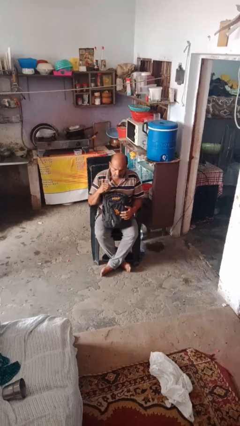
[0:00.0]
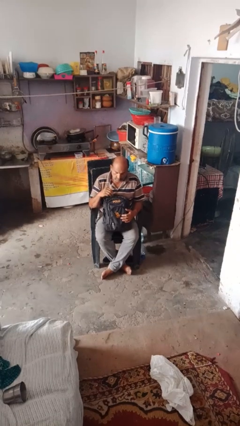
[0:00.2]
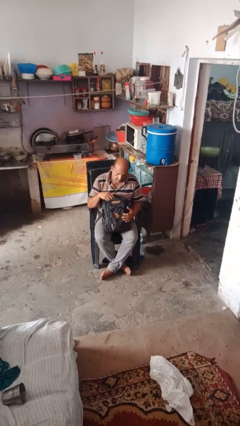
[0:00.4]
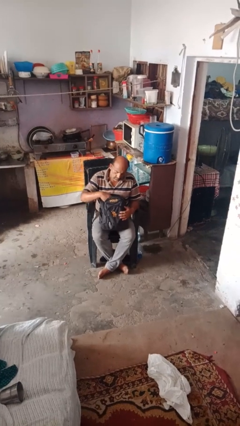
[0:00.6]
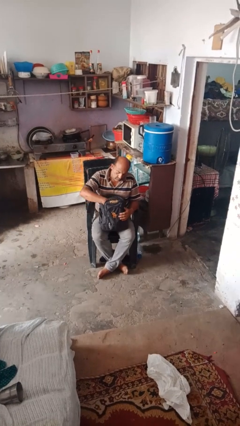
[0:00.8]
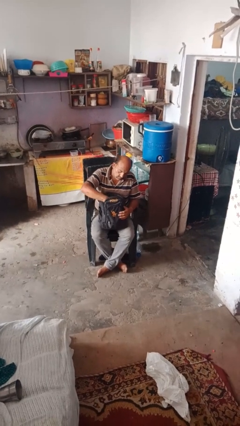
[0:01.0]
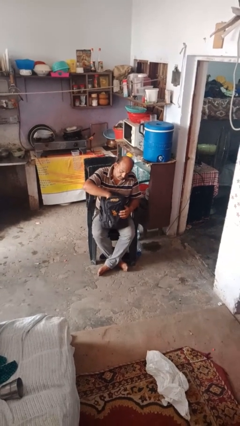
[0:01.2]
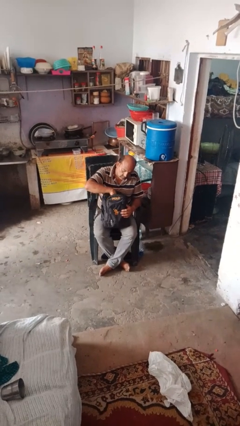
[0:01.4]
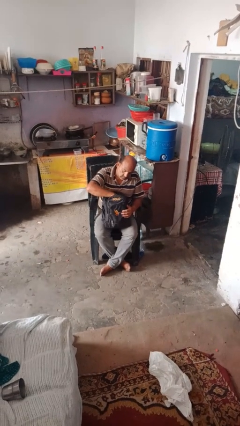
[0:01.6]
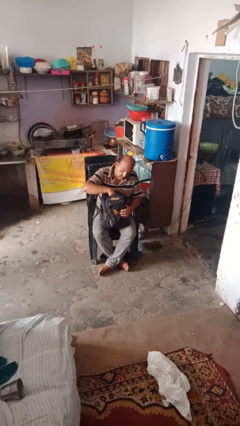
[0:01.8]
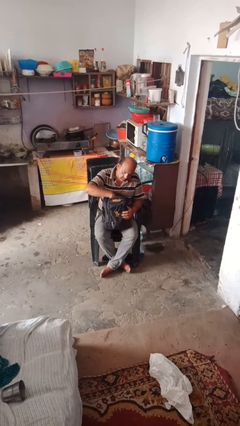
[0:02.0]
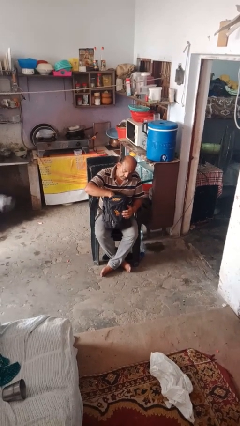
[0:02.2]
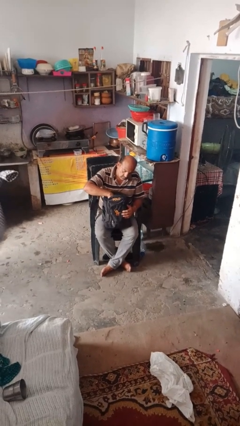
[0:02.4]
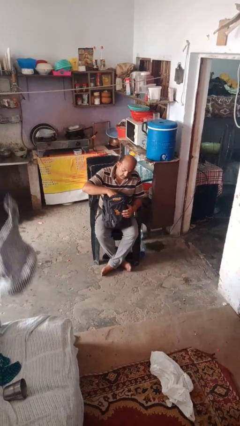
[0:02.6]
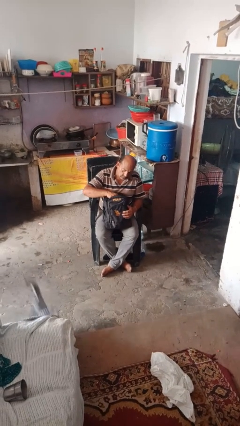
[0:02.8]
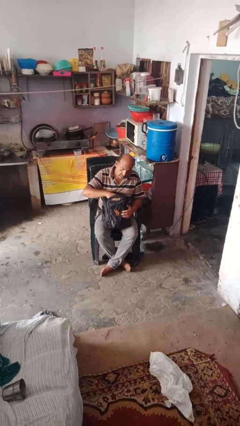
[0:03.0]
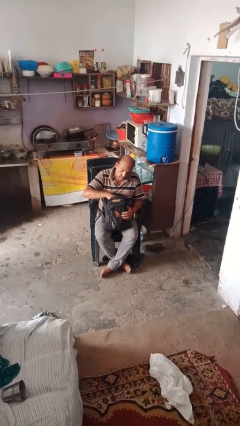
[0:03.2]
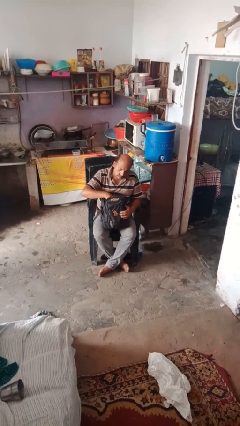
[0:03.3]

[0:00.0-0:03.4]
person searches in backpack

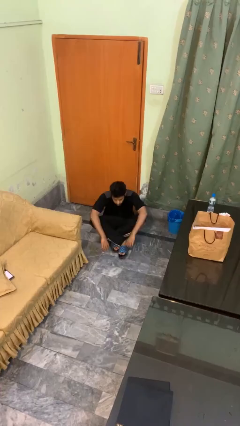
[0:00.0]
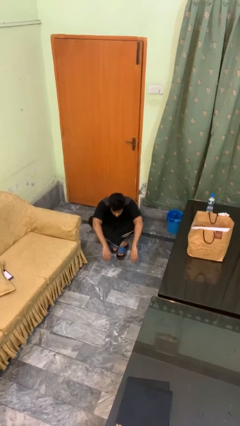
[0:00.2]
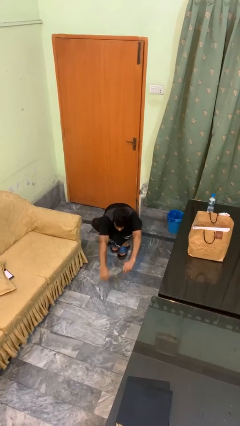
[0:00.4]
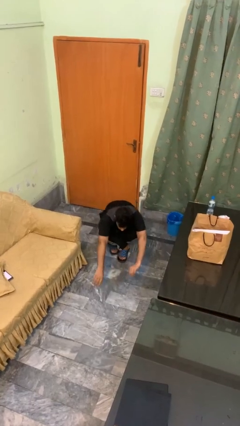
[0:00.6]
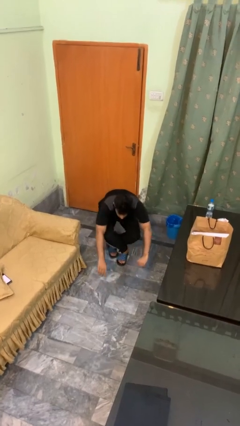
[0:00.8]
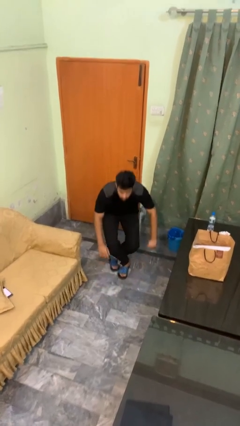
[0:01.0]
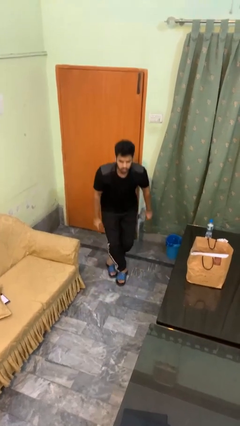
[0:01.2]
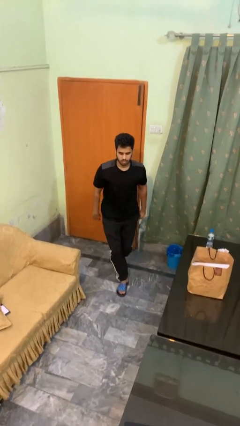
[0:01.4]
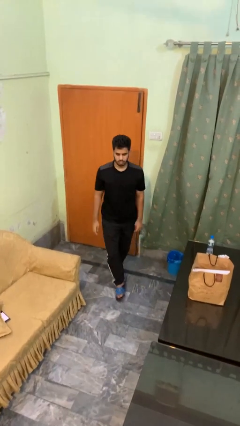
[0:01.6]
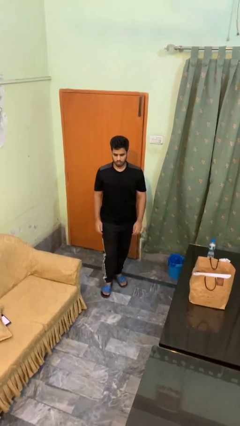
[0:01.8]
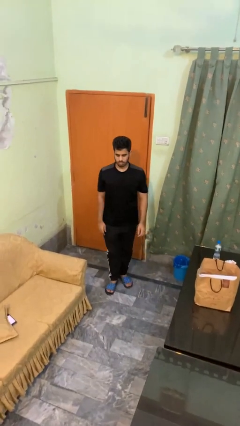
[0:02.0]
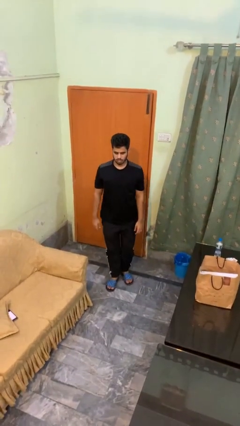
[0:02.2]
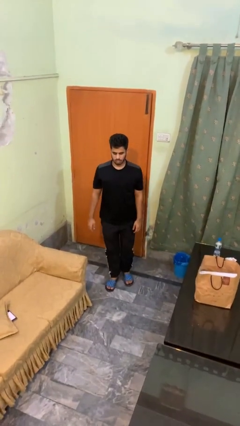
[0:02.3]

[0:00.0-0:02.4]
person stands up from floor

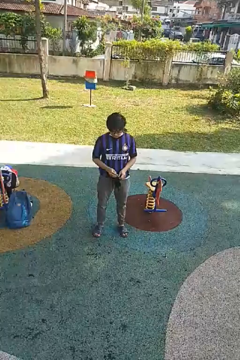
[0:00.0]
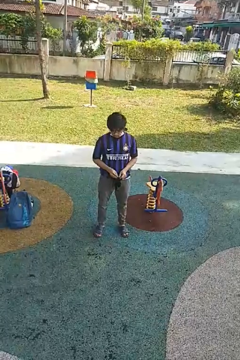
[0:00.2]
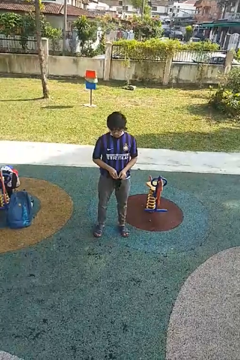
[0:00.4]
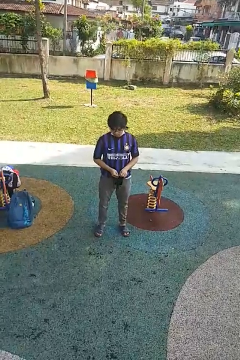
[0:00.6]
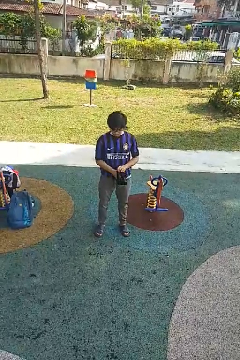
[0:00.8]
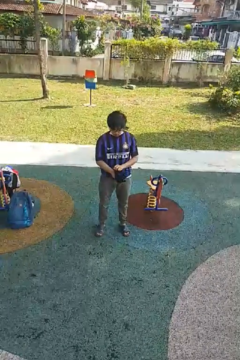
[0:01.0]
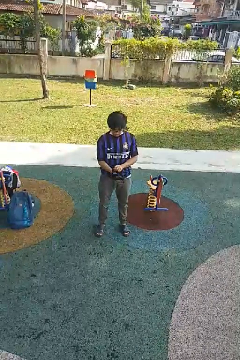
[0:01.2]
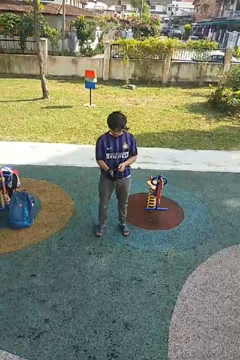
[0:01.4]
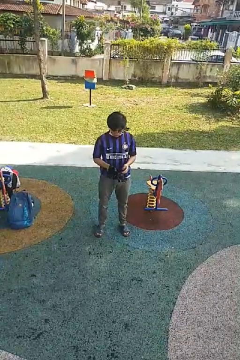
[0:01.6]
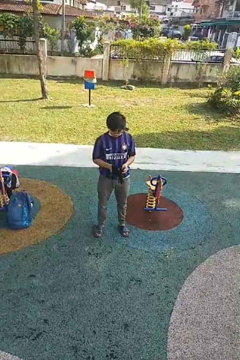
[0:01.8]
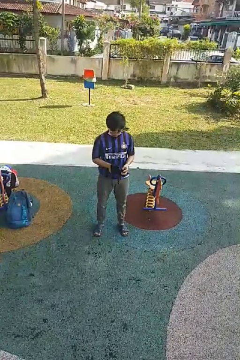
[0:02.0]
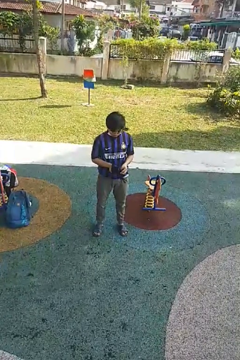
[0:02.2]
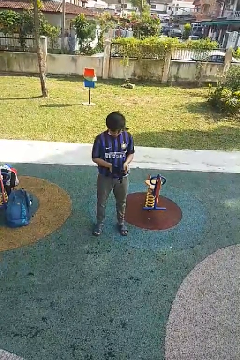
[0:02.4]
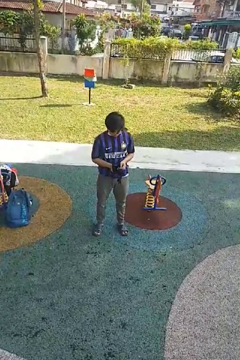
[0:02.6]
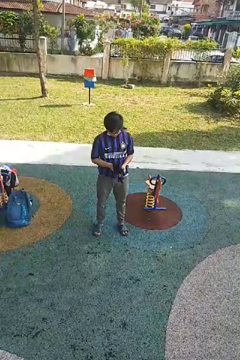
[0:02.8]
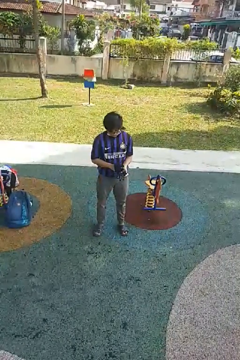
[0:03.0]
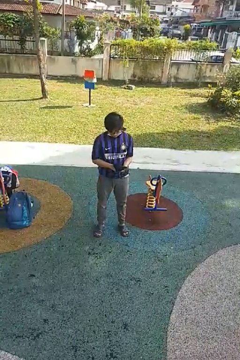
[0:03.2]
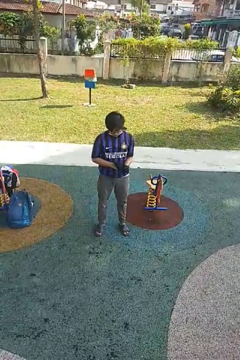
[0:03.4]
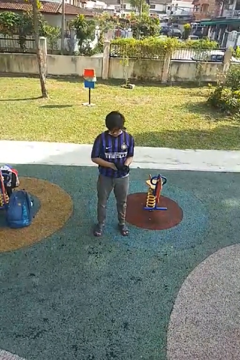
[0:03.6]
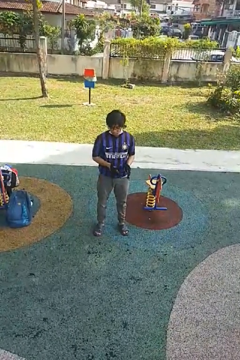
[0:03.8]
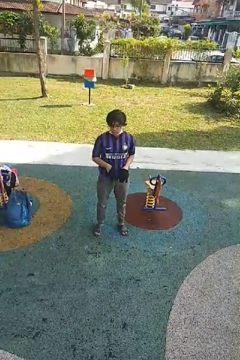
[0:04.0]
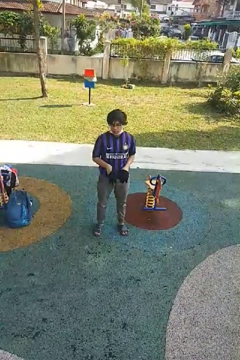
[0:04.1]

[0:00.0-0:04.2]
person puts on gloves

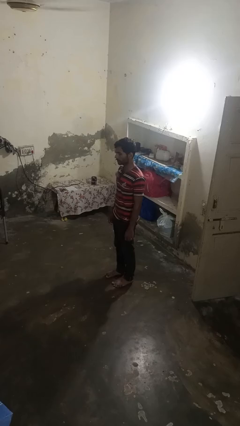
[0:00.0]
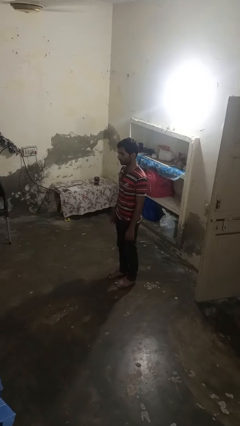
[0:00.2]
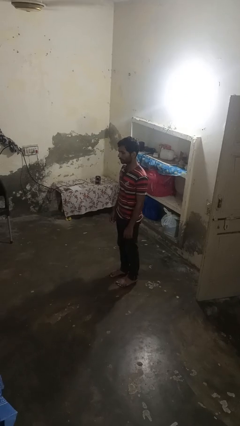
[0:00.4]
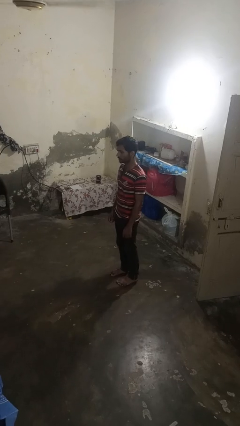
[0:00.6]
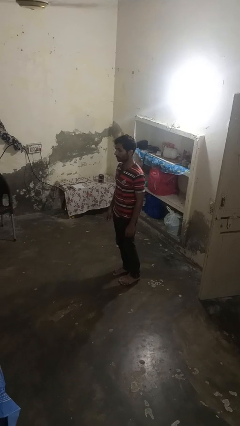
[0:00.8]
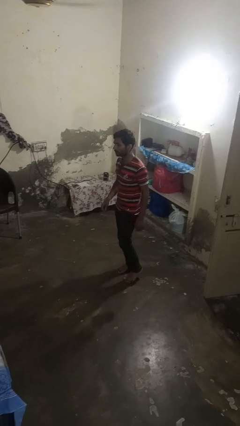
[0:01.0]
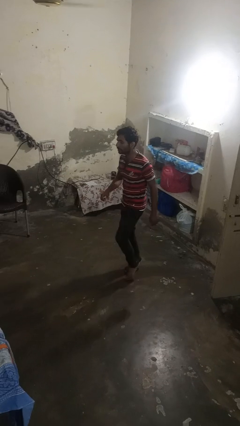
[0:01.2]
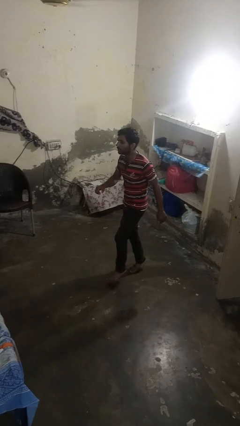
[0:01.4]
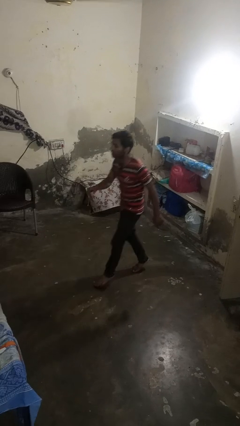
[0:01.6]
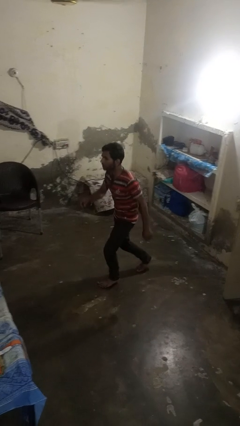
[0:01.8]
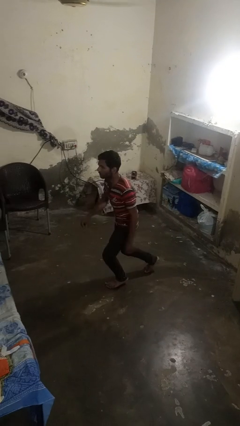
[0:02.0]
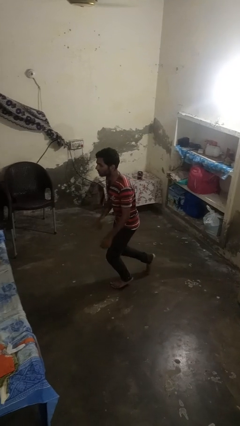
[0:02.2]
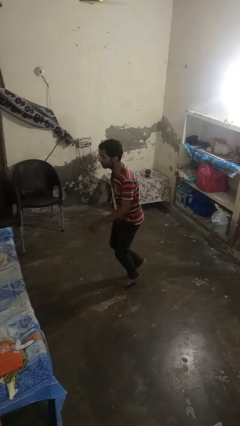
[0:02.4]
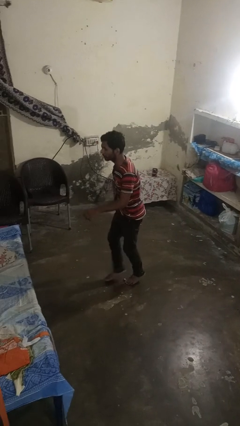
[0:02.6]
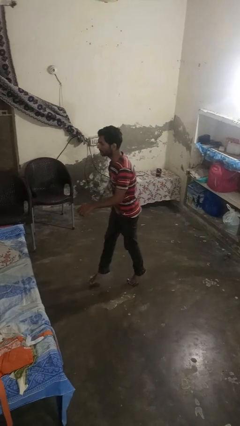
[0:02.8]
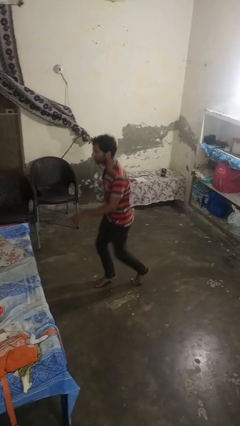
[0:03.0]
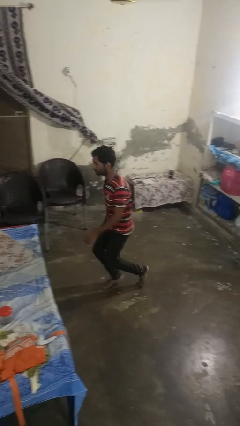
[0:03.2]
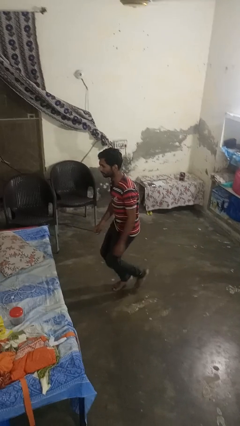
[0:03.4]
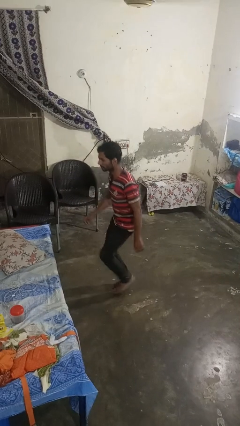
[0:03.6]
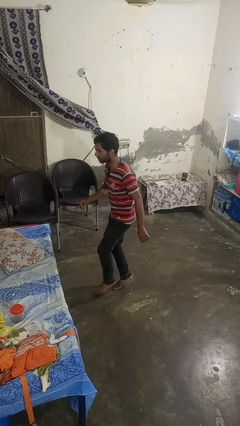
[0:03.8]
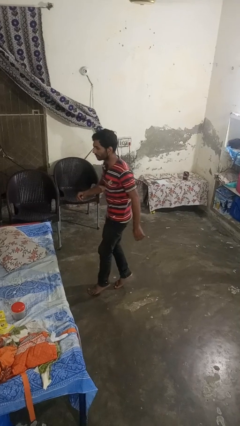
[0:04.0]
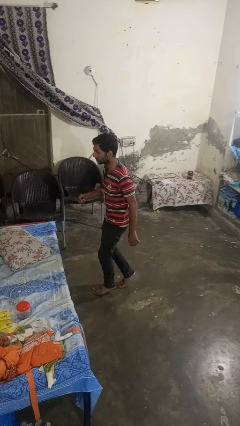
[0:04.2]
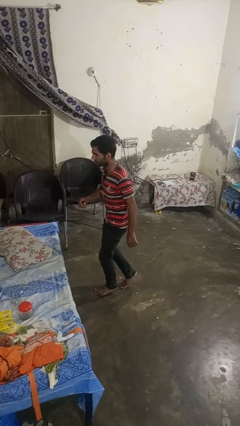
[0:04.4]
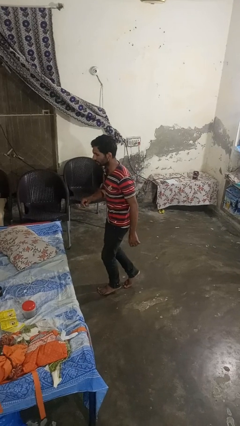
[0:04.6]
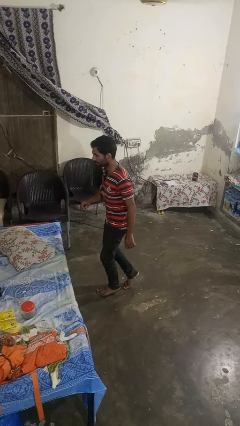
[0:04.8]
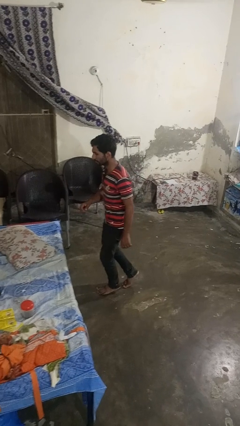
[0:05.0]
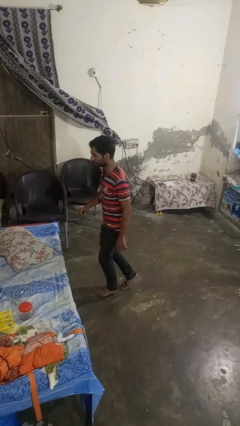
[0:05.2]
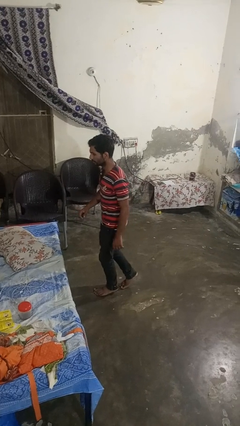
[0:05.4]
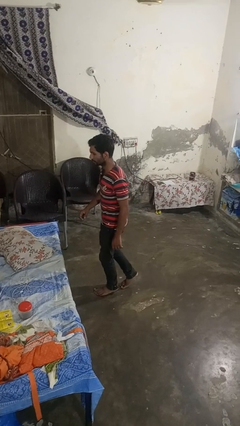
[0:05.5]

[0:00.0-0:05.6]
person walks tiptoe

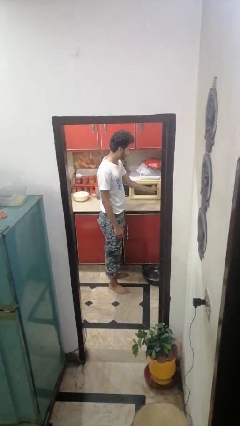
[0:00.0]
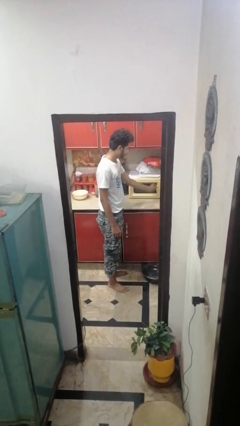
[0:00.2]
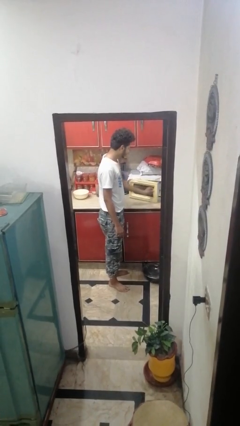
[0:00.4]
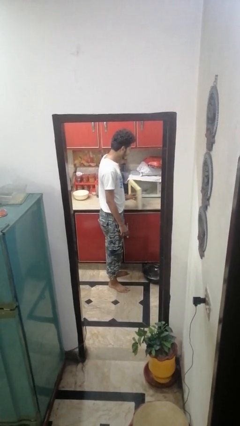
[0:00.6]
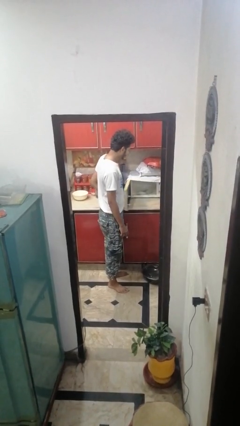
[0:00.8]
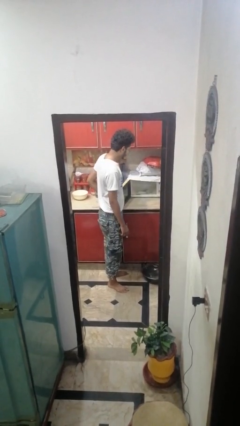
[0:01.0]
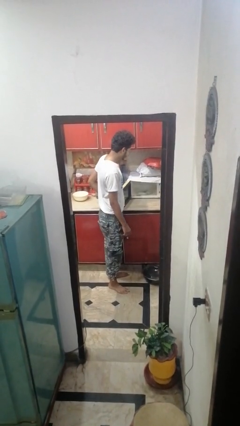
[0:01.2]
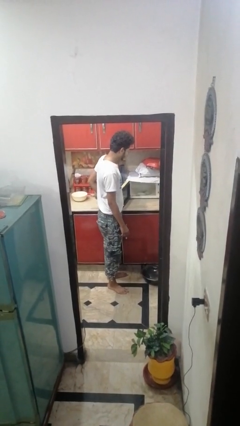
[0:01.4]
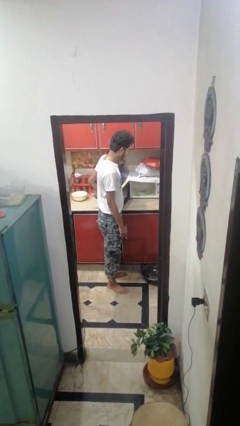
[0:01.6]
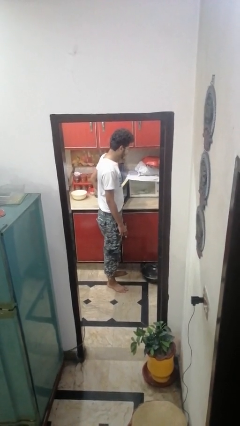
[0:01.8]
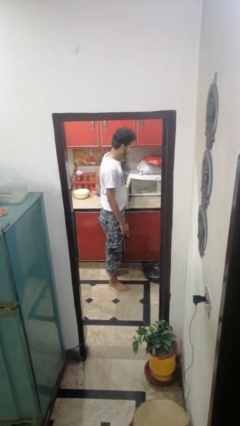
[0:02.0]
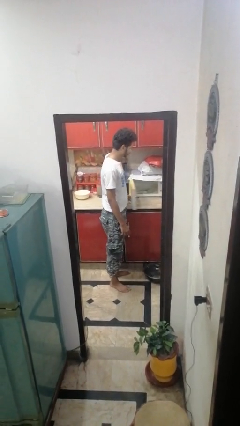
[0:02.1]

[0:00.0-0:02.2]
person opens microwave

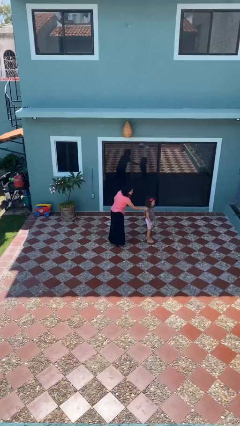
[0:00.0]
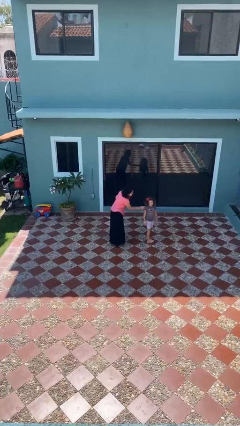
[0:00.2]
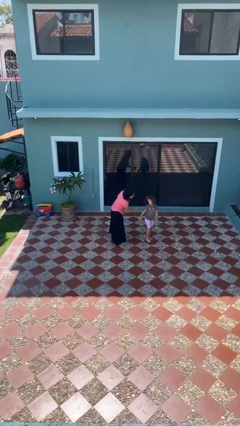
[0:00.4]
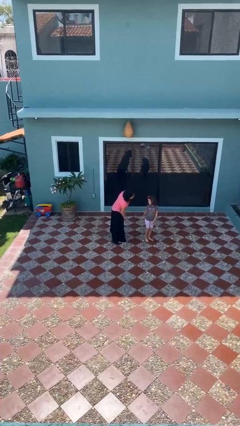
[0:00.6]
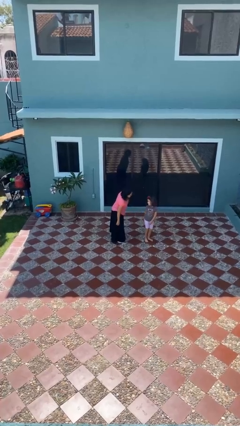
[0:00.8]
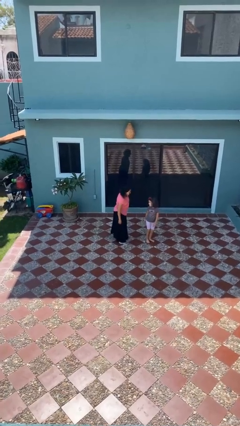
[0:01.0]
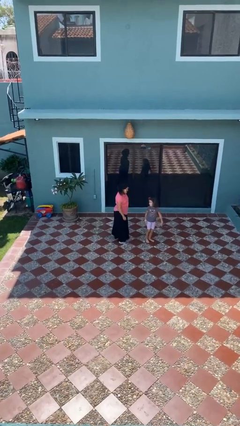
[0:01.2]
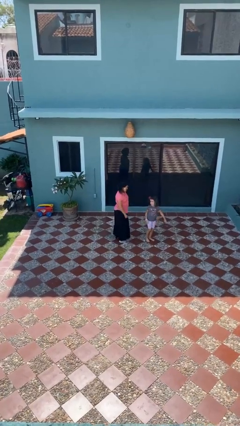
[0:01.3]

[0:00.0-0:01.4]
person spins person around
